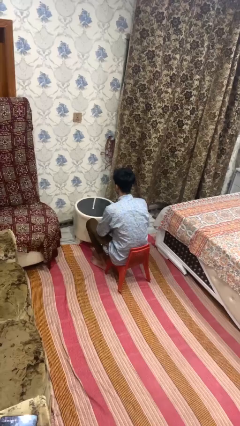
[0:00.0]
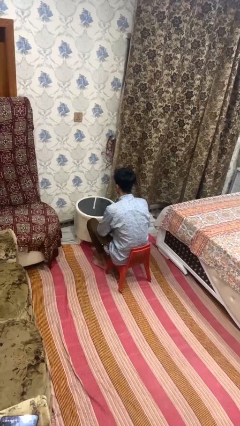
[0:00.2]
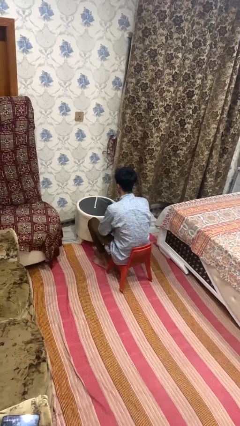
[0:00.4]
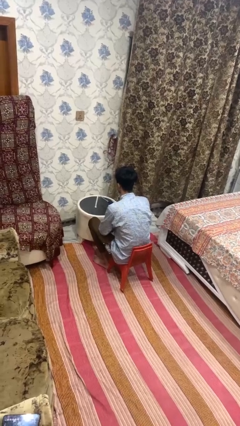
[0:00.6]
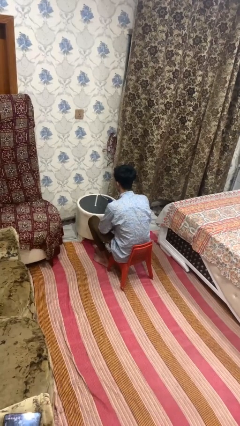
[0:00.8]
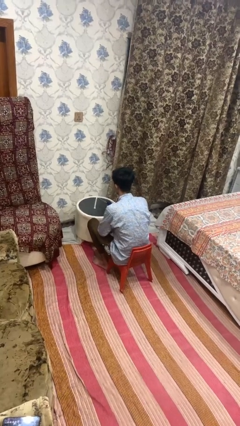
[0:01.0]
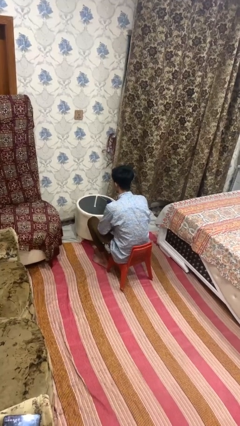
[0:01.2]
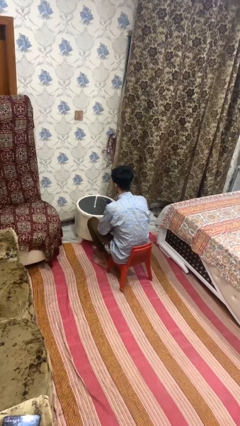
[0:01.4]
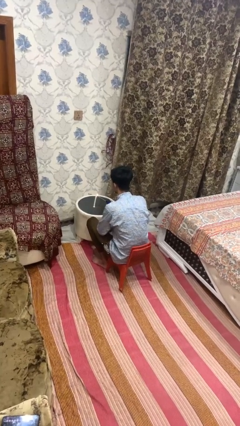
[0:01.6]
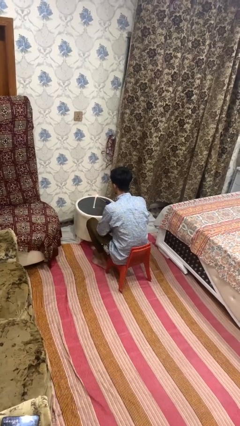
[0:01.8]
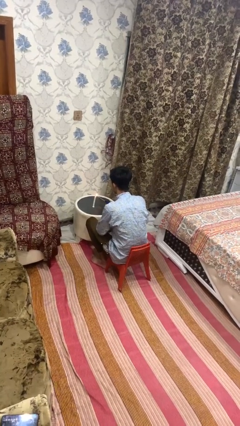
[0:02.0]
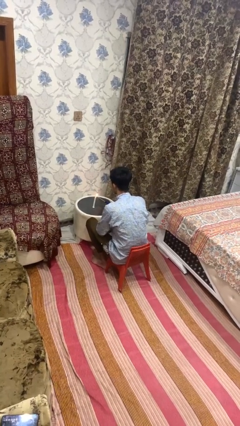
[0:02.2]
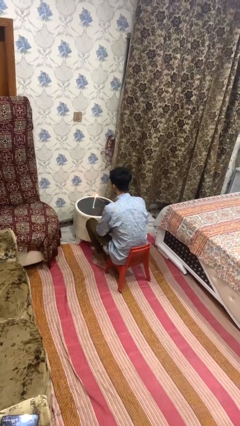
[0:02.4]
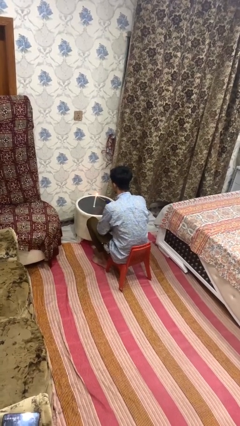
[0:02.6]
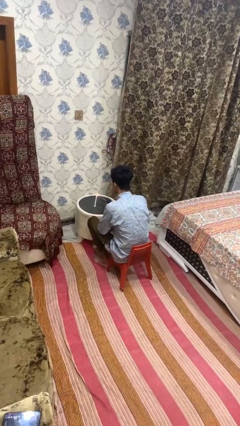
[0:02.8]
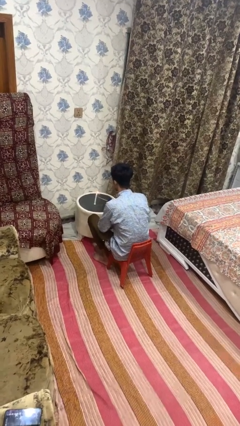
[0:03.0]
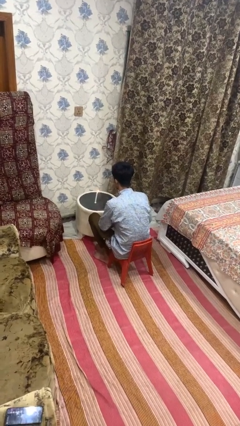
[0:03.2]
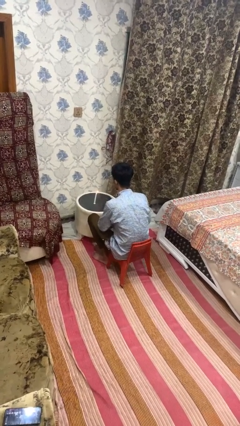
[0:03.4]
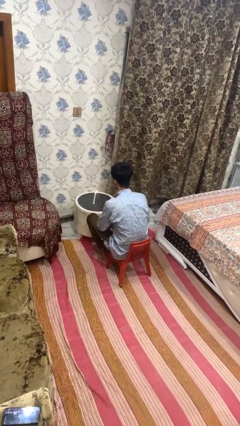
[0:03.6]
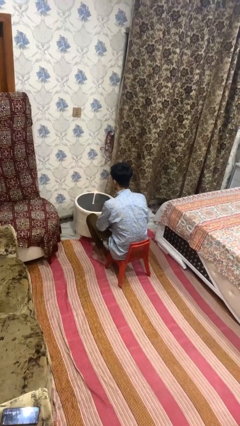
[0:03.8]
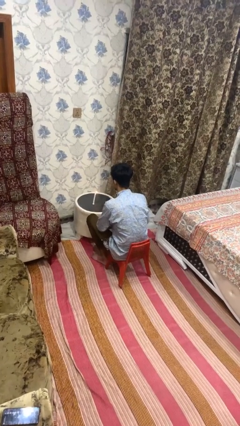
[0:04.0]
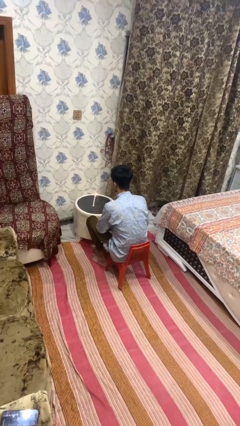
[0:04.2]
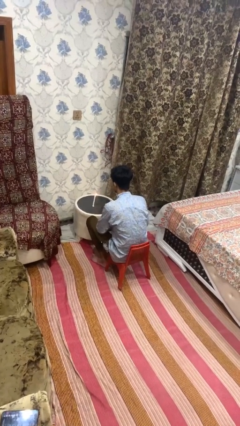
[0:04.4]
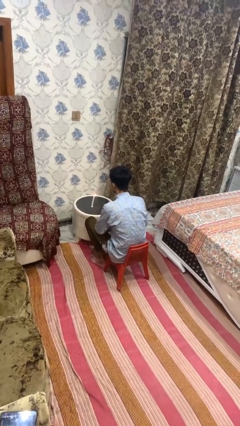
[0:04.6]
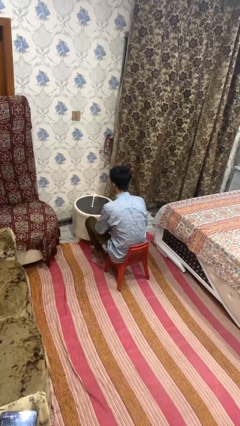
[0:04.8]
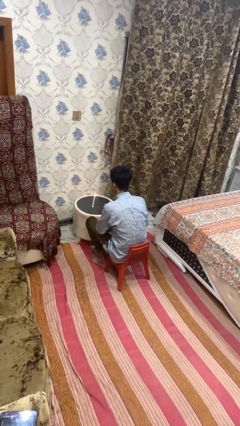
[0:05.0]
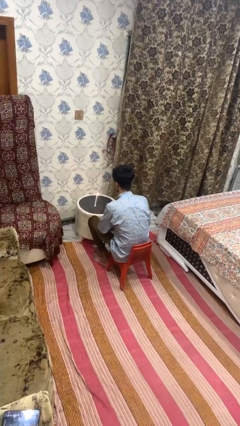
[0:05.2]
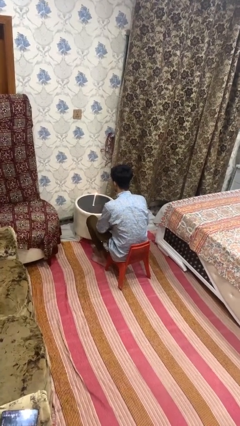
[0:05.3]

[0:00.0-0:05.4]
person lights candle

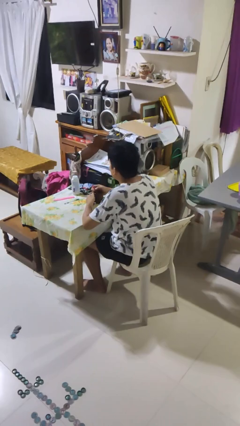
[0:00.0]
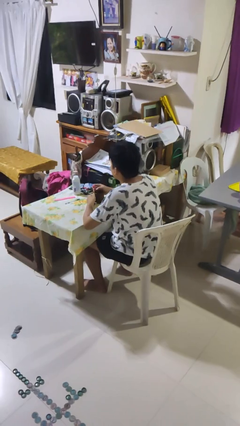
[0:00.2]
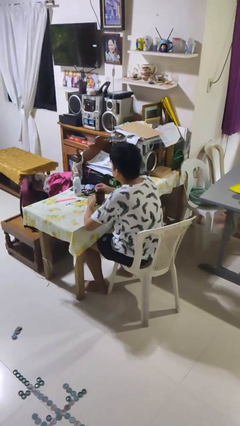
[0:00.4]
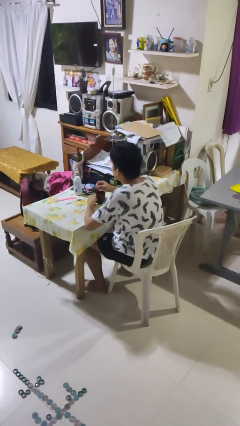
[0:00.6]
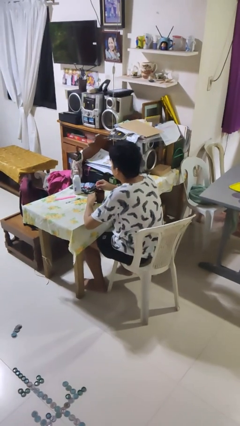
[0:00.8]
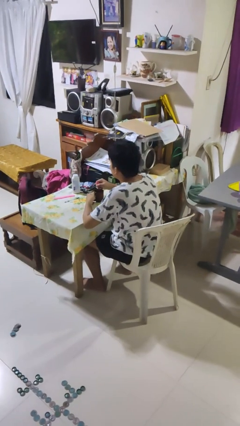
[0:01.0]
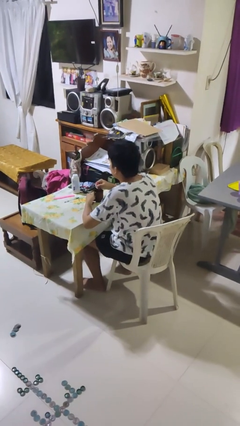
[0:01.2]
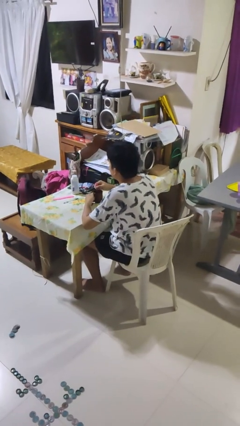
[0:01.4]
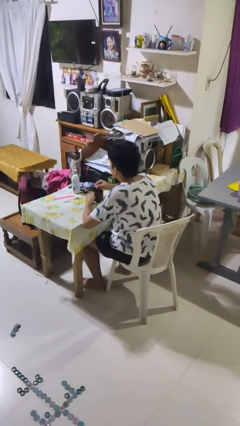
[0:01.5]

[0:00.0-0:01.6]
person stirs mug

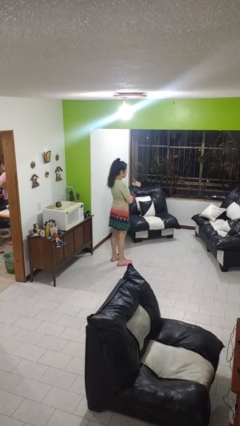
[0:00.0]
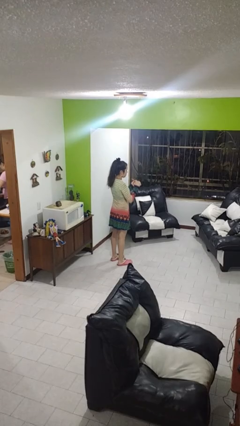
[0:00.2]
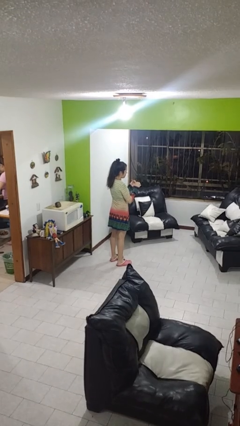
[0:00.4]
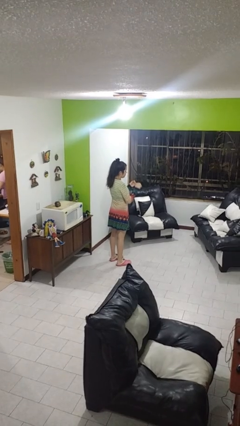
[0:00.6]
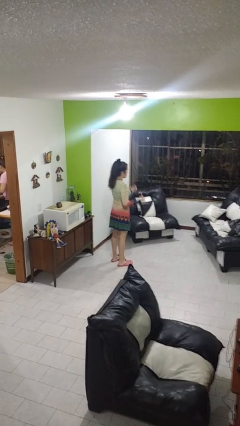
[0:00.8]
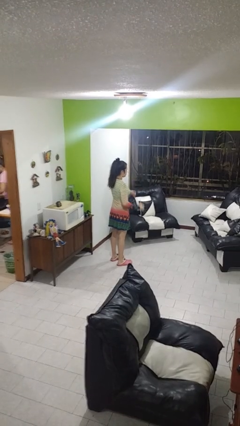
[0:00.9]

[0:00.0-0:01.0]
person files fingernails

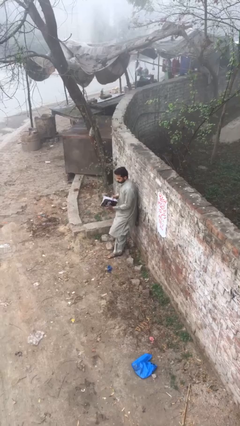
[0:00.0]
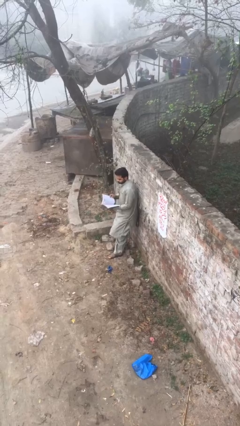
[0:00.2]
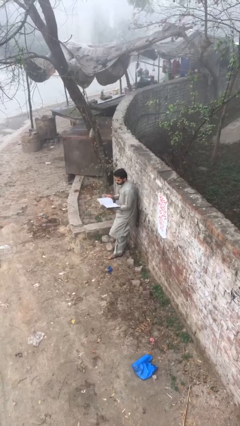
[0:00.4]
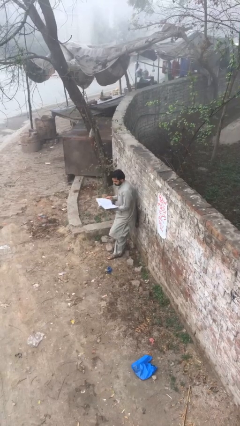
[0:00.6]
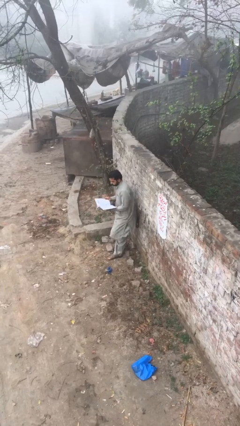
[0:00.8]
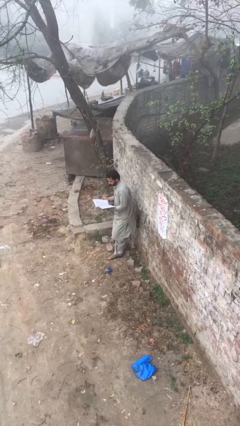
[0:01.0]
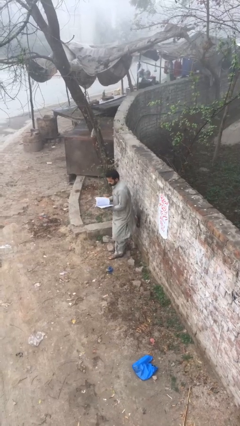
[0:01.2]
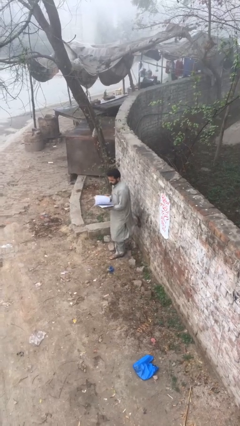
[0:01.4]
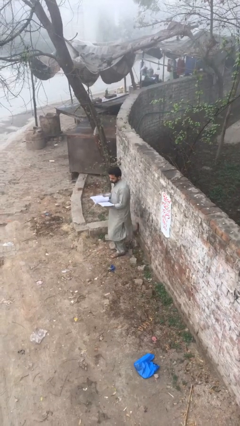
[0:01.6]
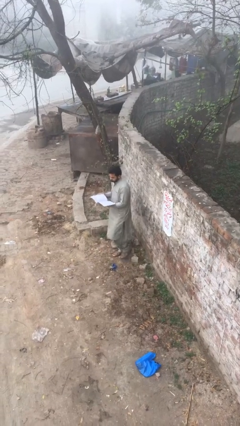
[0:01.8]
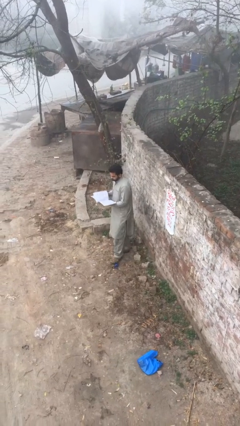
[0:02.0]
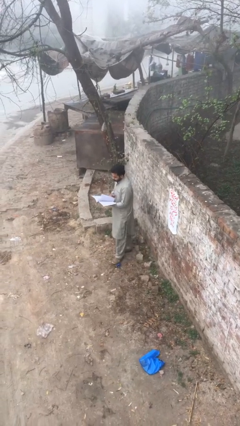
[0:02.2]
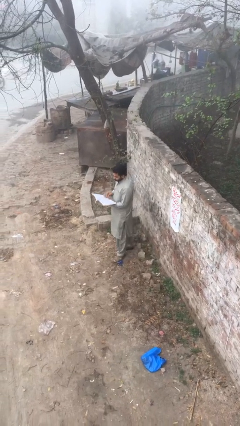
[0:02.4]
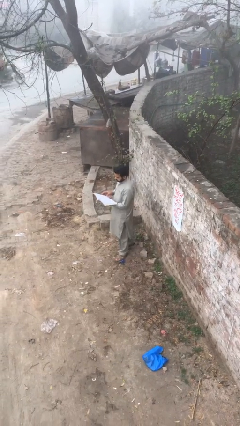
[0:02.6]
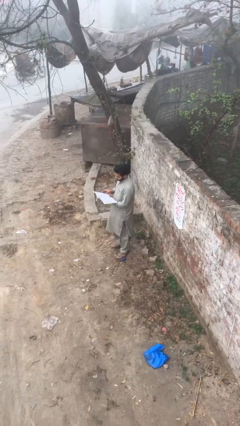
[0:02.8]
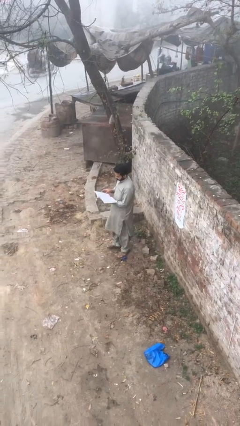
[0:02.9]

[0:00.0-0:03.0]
person reads document

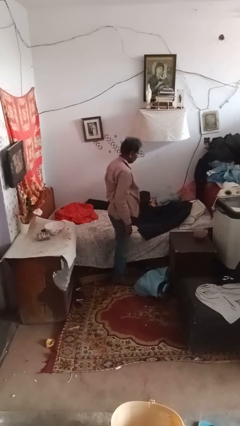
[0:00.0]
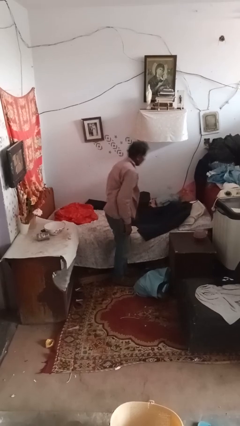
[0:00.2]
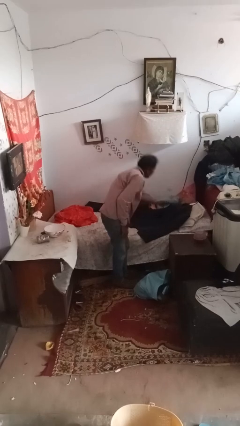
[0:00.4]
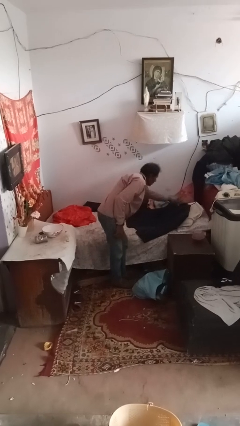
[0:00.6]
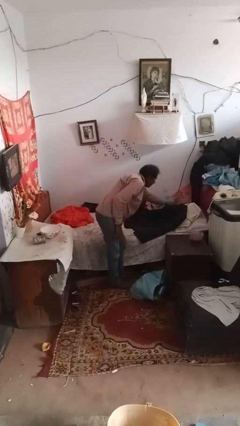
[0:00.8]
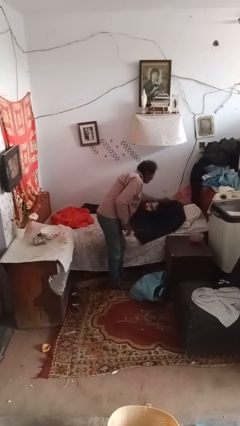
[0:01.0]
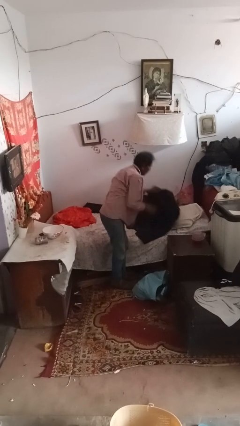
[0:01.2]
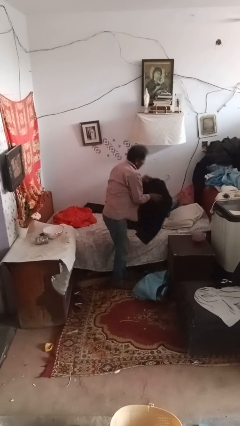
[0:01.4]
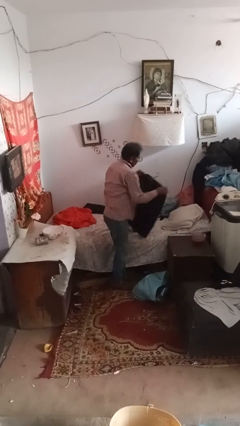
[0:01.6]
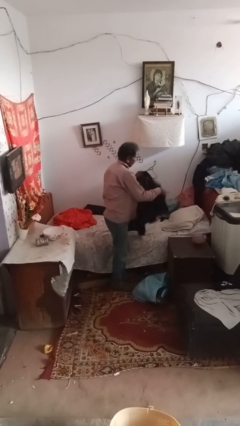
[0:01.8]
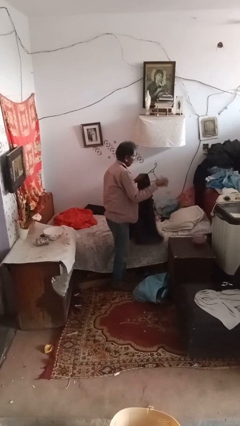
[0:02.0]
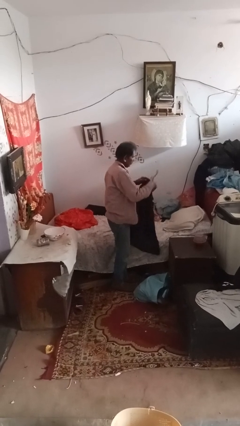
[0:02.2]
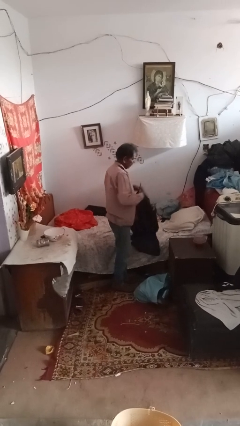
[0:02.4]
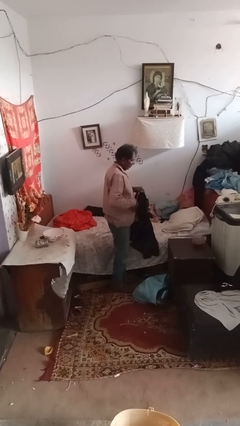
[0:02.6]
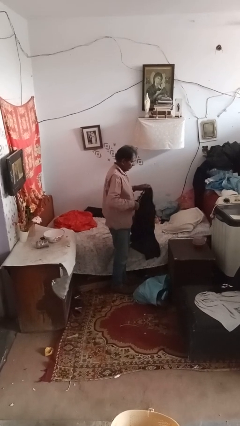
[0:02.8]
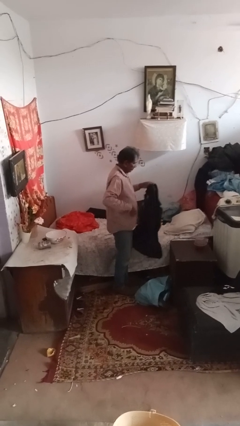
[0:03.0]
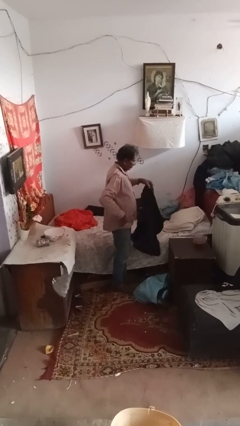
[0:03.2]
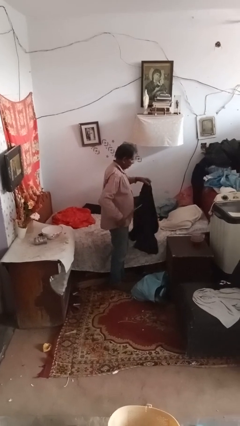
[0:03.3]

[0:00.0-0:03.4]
person takes clothes from closet

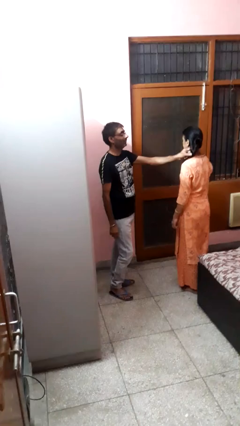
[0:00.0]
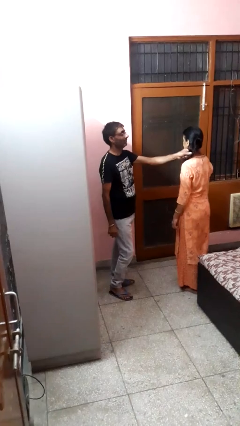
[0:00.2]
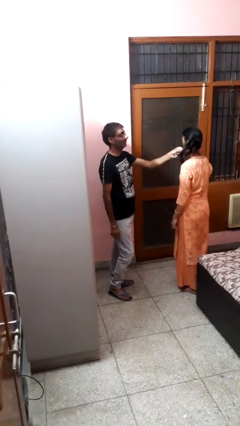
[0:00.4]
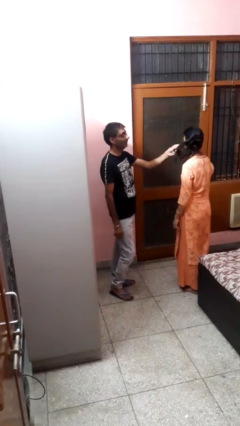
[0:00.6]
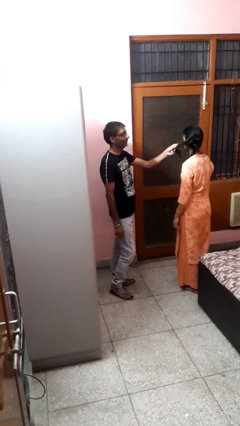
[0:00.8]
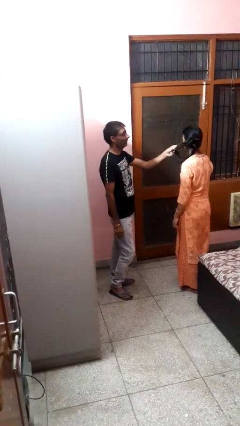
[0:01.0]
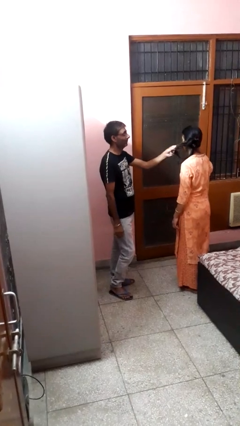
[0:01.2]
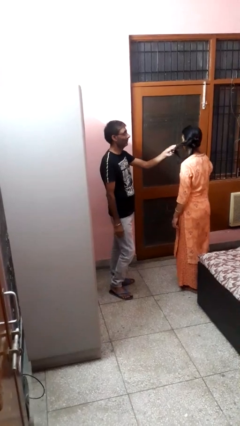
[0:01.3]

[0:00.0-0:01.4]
person grabs person by hair

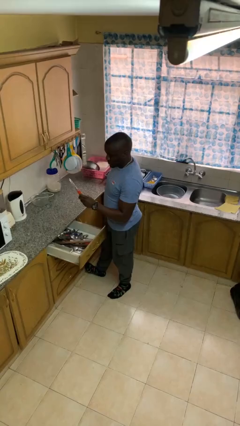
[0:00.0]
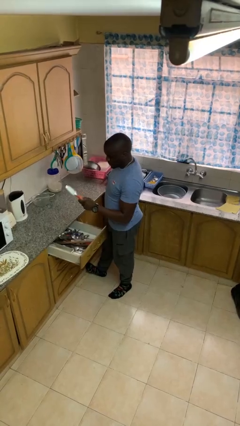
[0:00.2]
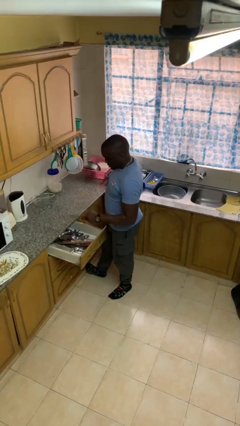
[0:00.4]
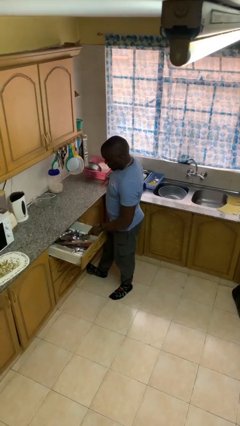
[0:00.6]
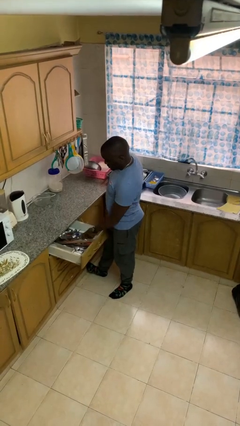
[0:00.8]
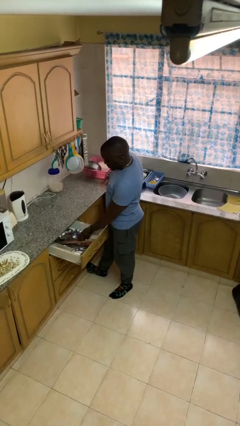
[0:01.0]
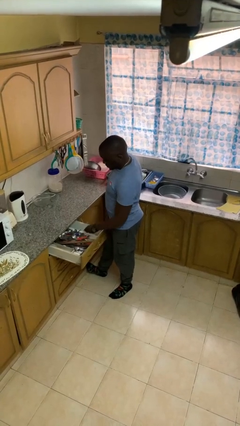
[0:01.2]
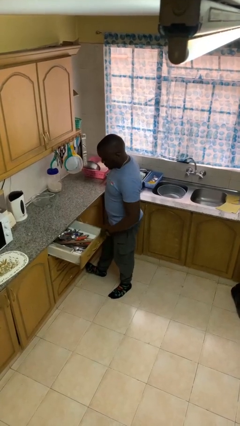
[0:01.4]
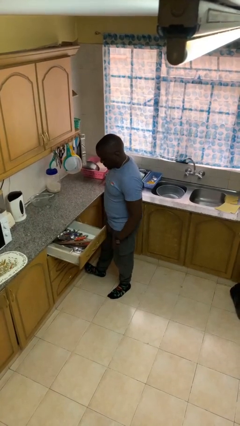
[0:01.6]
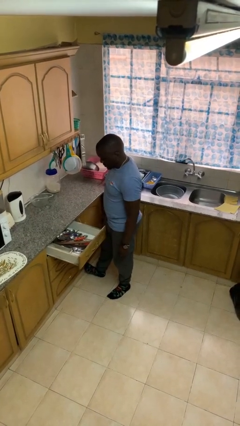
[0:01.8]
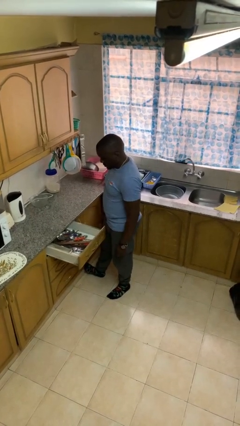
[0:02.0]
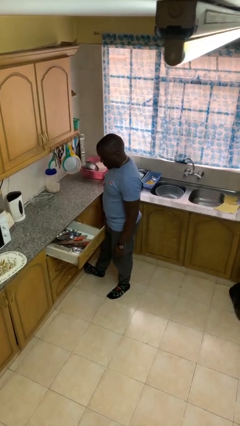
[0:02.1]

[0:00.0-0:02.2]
person puts object into kitchen drawer
